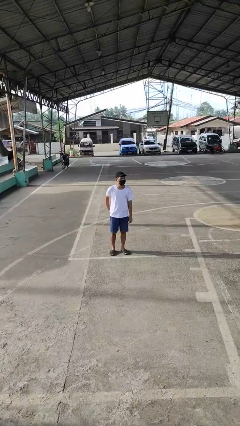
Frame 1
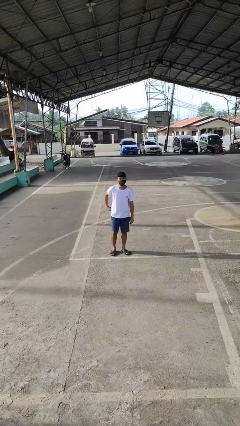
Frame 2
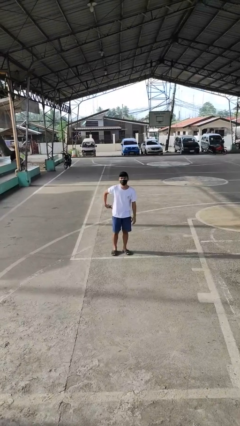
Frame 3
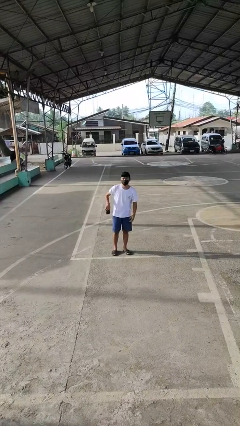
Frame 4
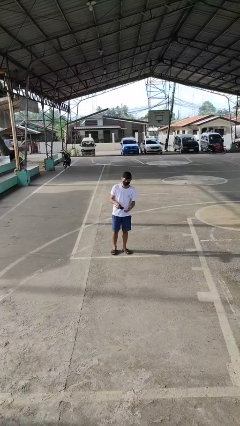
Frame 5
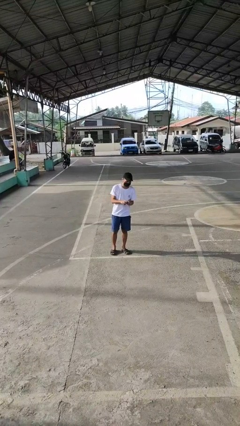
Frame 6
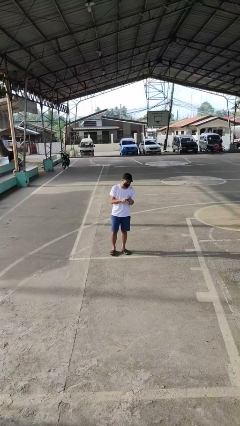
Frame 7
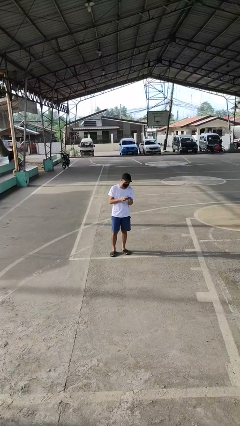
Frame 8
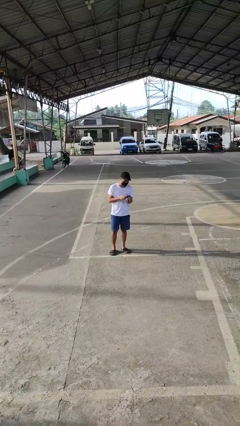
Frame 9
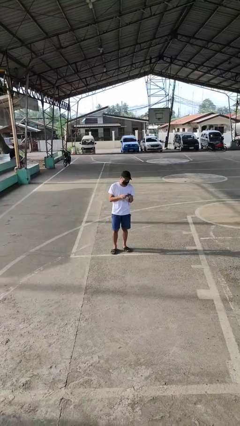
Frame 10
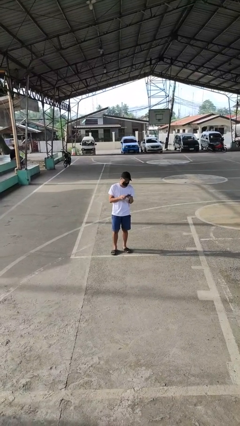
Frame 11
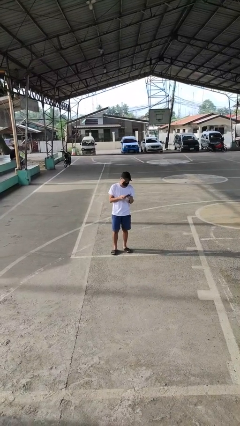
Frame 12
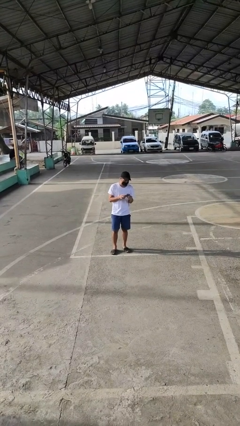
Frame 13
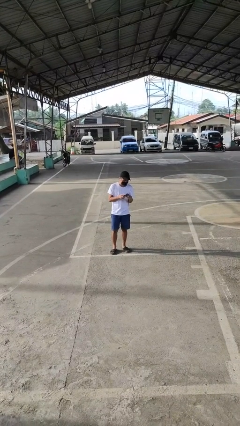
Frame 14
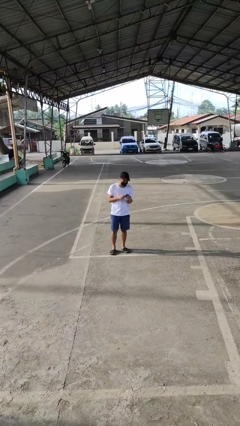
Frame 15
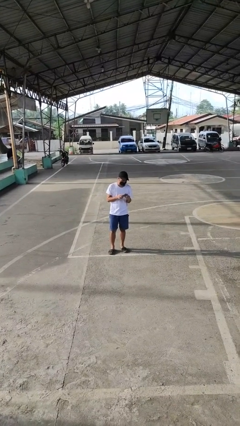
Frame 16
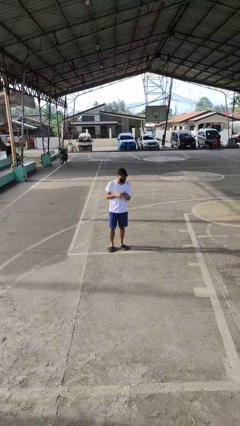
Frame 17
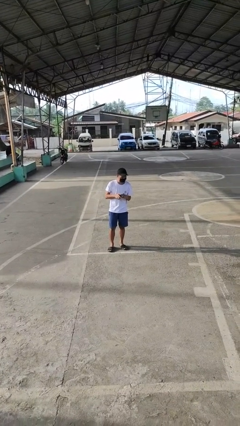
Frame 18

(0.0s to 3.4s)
person takes phone from pocket

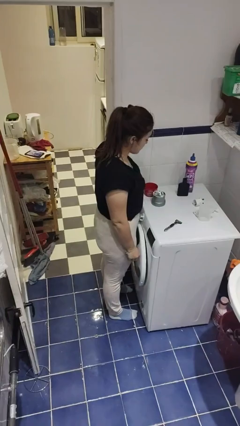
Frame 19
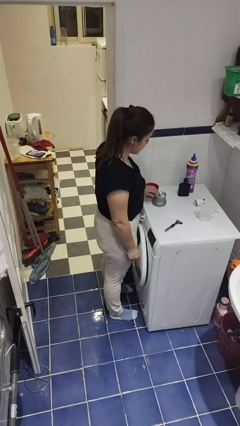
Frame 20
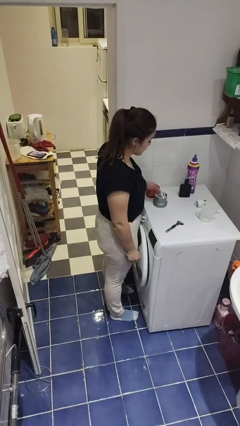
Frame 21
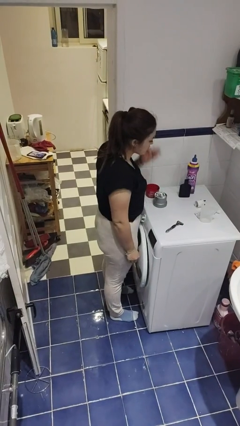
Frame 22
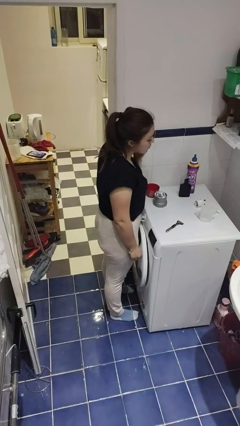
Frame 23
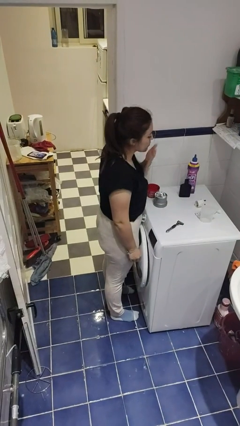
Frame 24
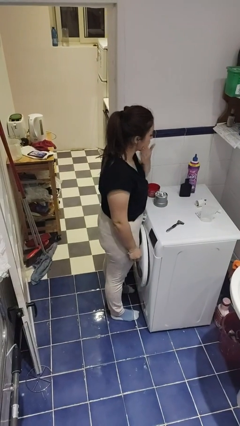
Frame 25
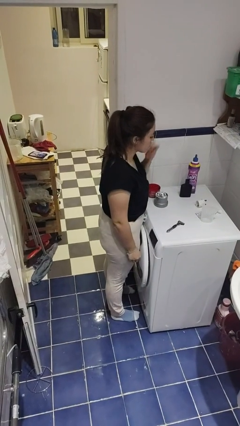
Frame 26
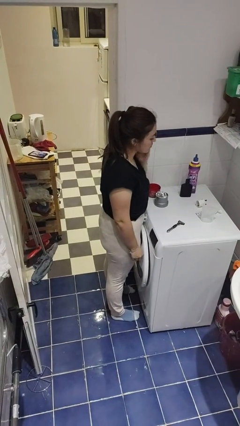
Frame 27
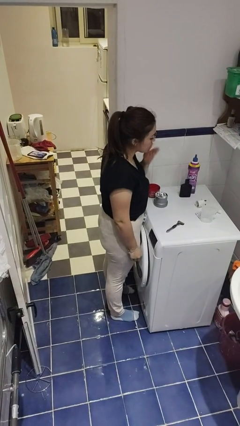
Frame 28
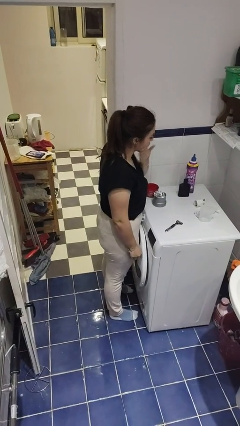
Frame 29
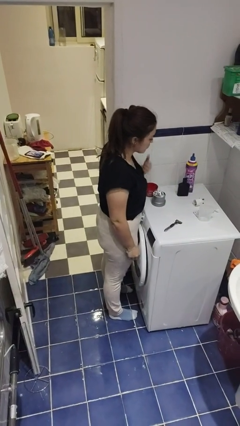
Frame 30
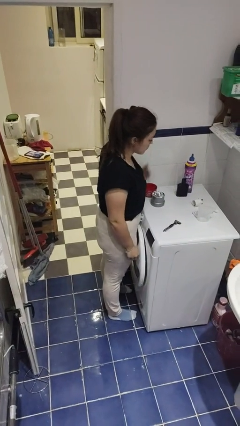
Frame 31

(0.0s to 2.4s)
person applies shaving cream

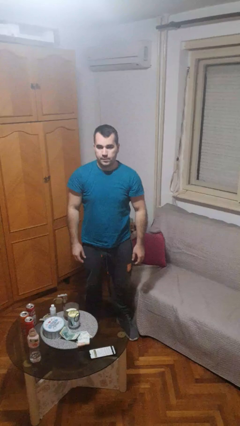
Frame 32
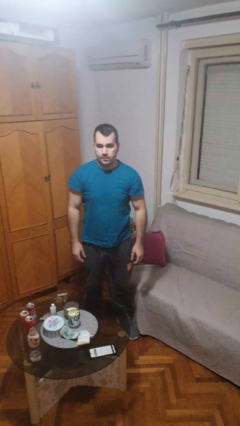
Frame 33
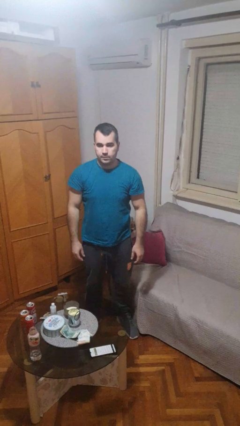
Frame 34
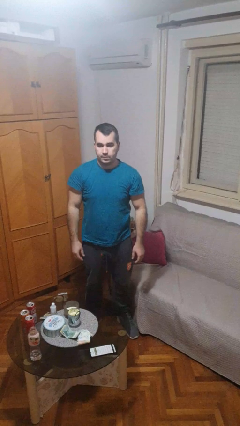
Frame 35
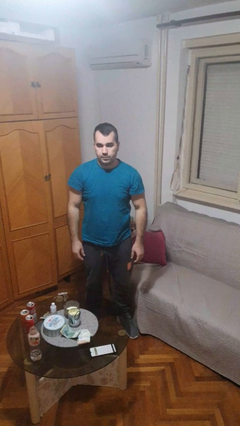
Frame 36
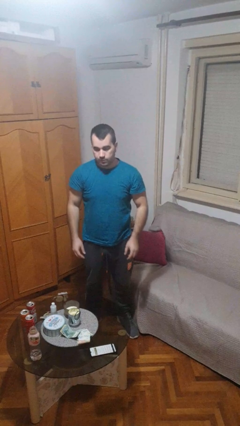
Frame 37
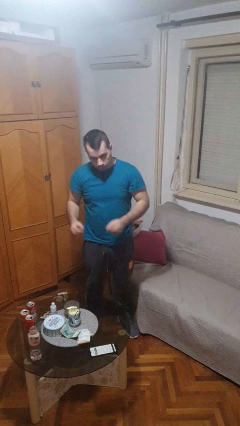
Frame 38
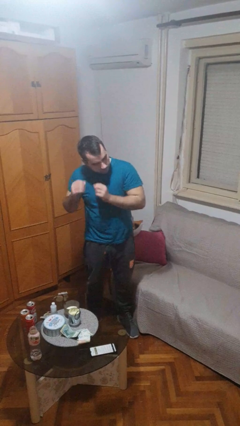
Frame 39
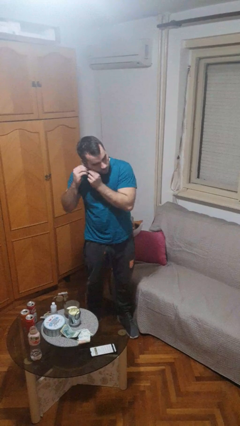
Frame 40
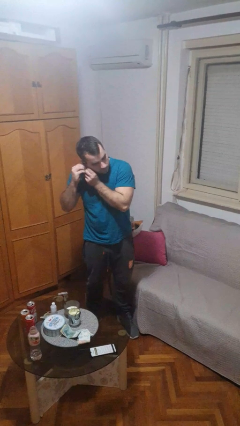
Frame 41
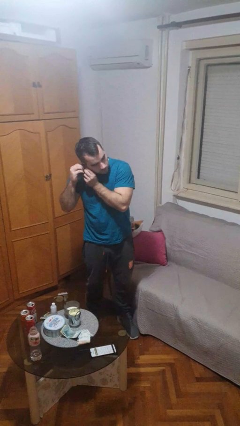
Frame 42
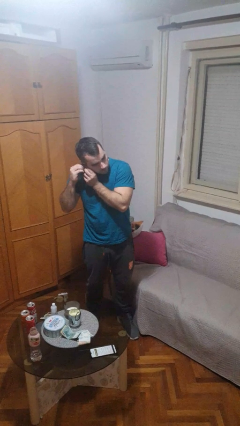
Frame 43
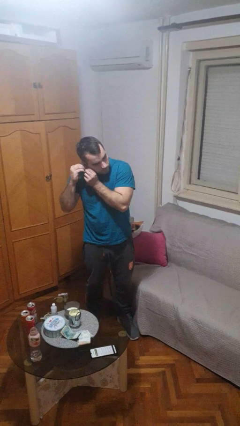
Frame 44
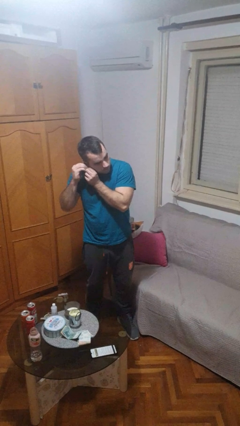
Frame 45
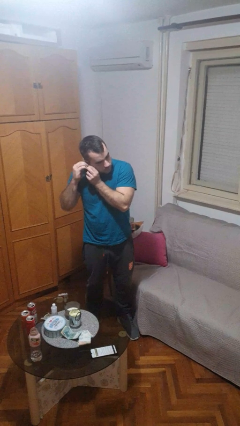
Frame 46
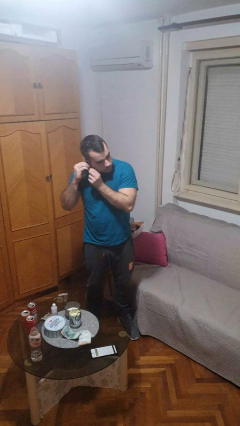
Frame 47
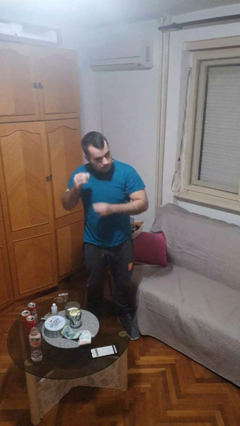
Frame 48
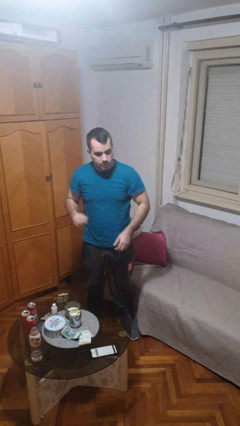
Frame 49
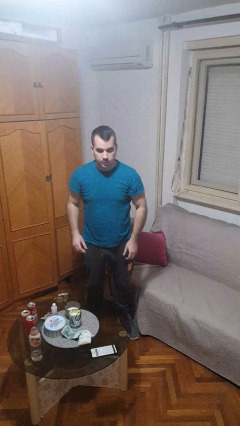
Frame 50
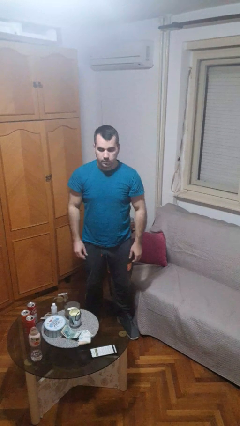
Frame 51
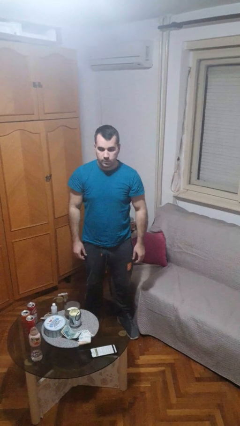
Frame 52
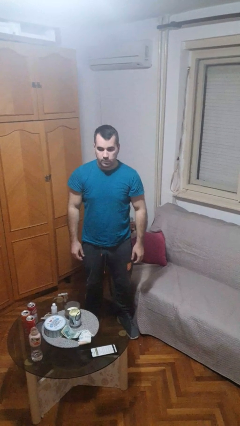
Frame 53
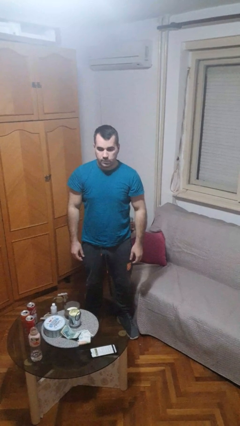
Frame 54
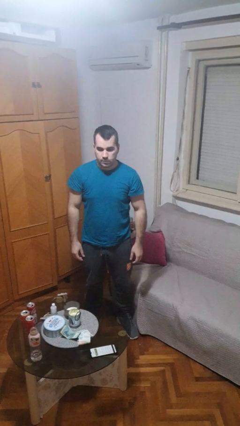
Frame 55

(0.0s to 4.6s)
person takes off earrings

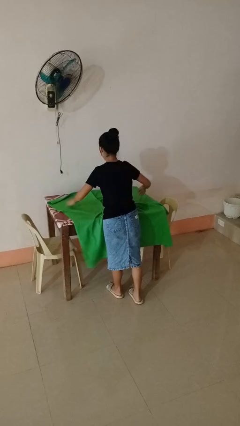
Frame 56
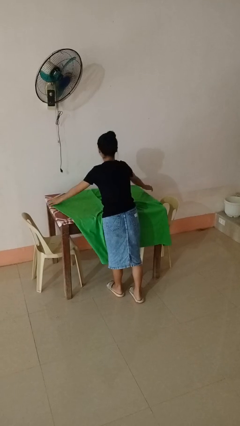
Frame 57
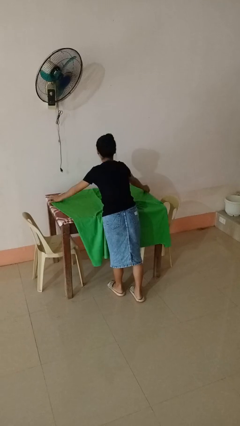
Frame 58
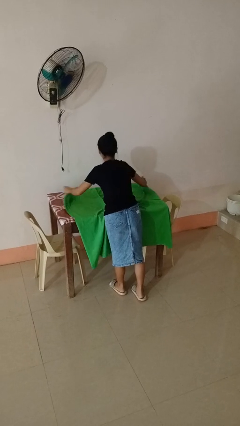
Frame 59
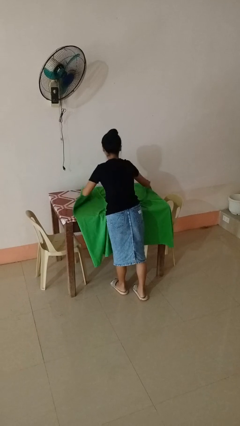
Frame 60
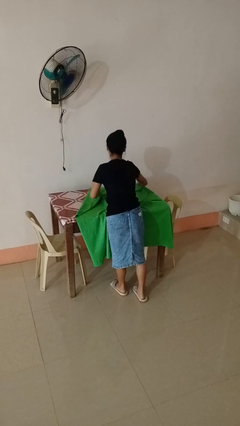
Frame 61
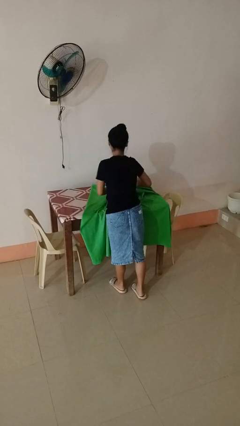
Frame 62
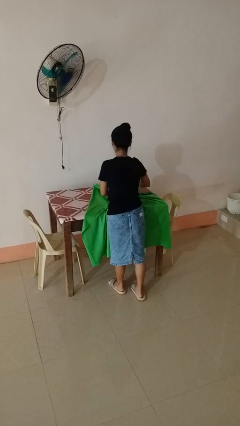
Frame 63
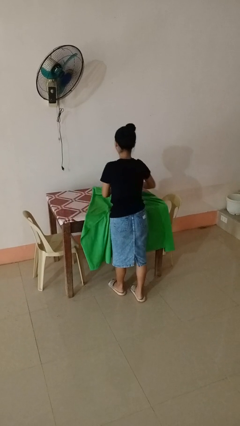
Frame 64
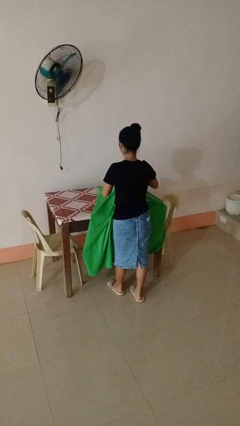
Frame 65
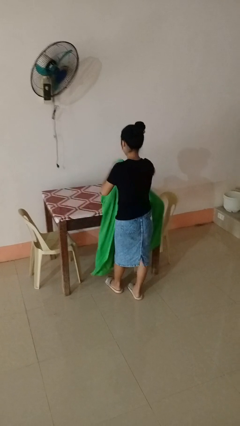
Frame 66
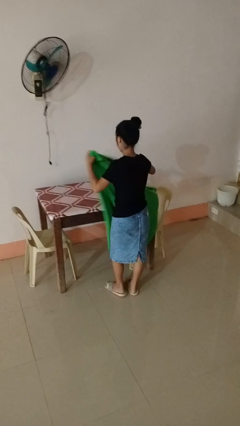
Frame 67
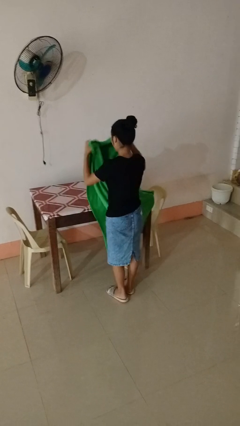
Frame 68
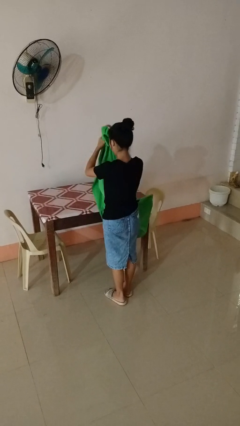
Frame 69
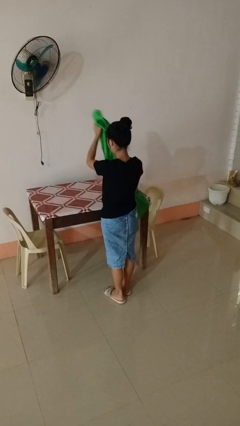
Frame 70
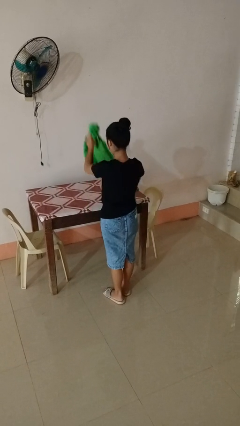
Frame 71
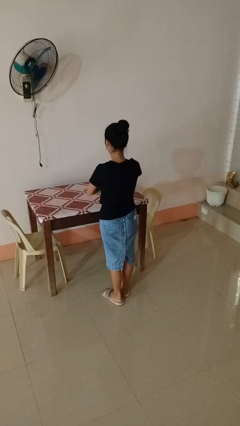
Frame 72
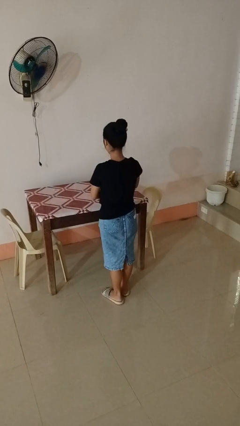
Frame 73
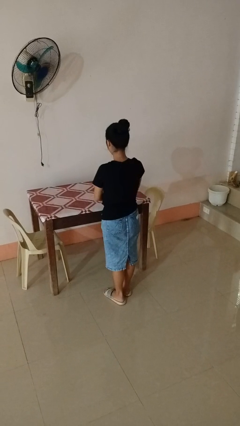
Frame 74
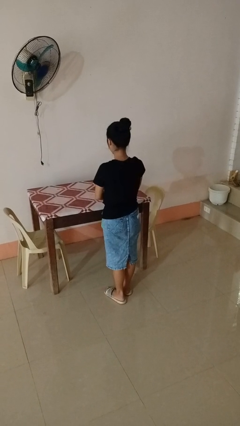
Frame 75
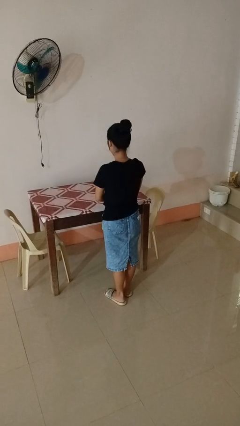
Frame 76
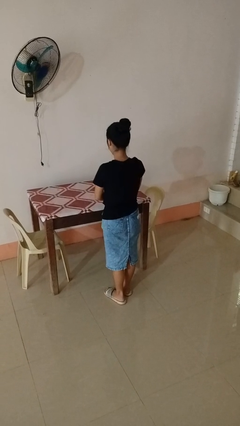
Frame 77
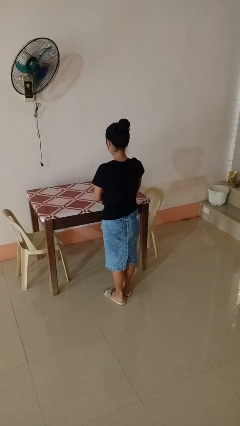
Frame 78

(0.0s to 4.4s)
person folds tablecloth

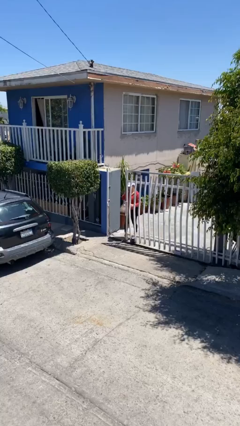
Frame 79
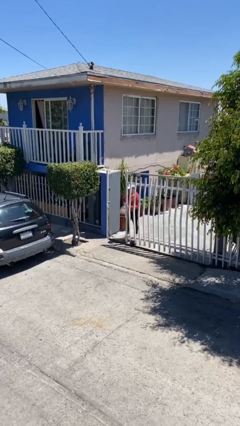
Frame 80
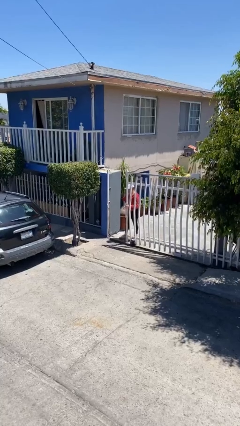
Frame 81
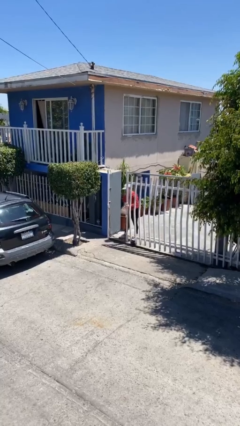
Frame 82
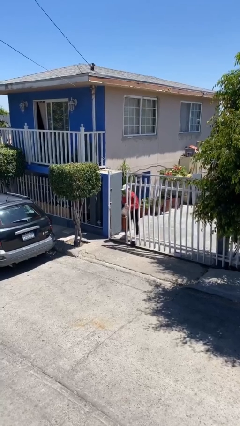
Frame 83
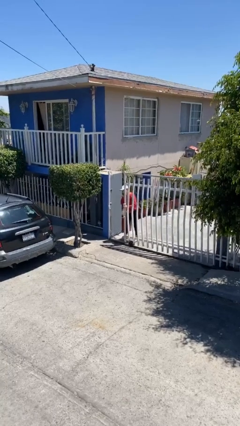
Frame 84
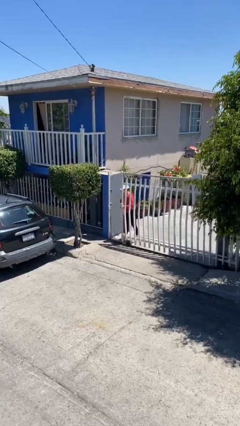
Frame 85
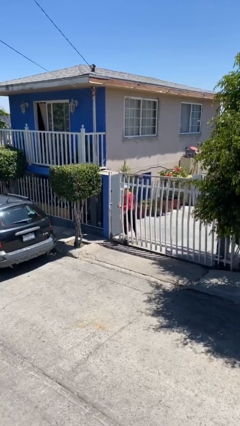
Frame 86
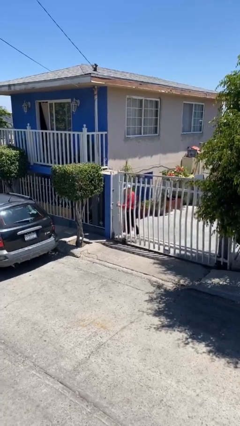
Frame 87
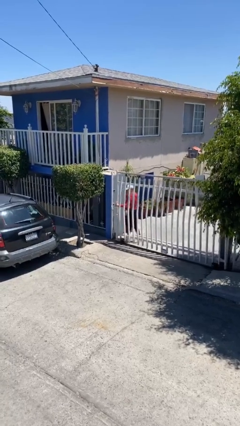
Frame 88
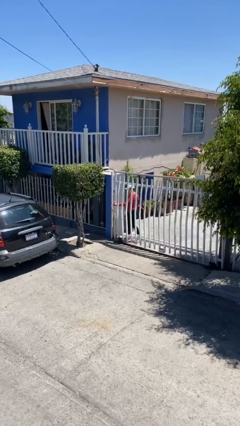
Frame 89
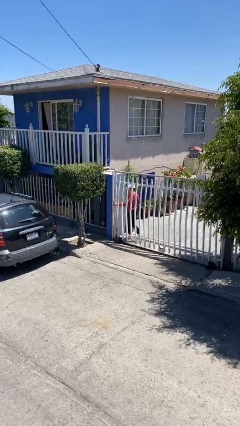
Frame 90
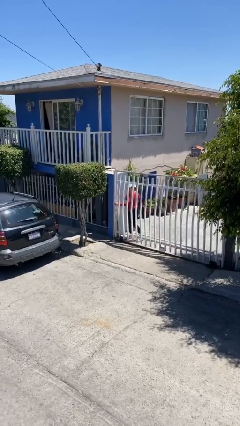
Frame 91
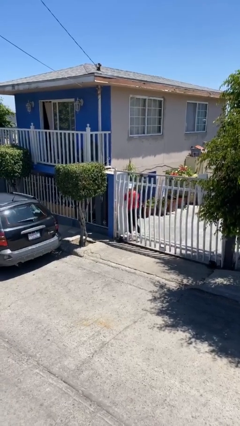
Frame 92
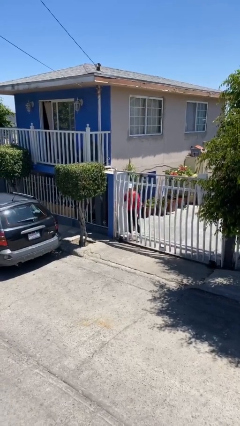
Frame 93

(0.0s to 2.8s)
person closes facility door
